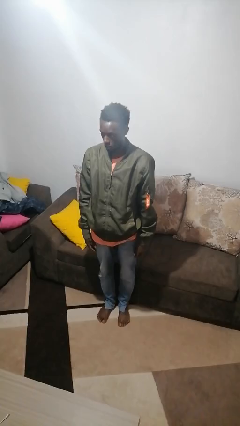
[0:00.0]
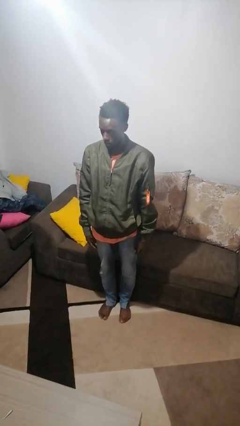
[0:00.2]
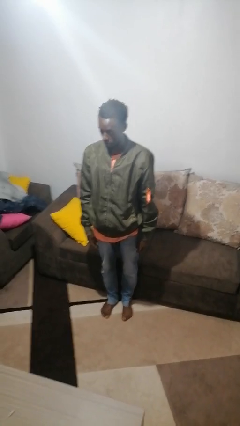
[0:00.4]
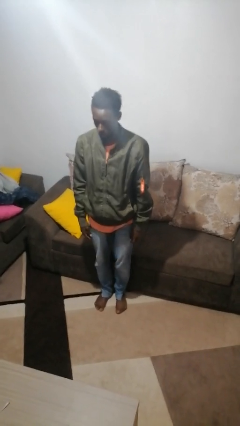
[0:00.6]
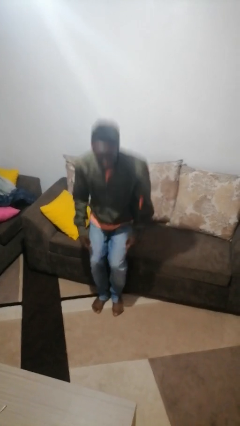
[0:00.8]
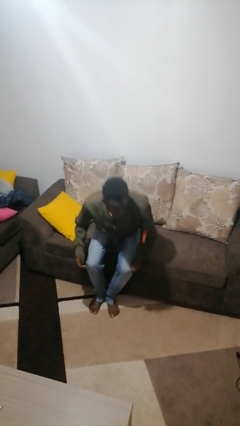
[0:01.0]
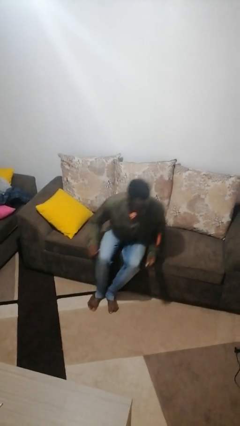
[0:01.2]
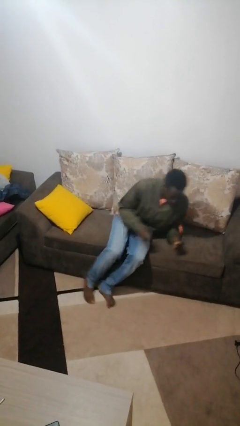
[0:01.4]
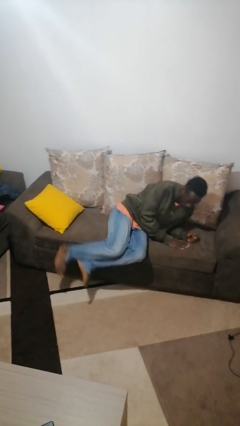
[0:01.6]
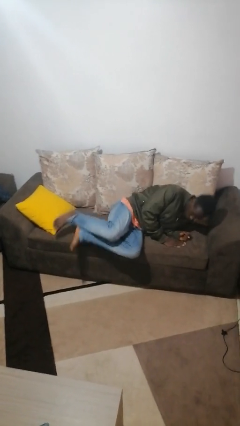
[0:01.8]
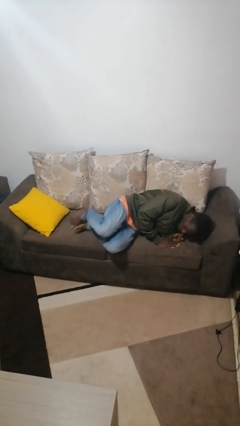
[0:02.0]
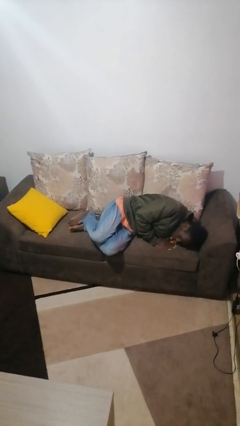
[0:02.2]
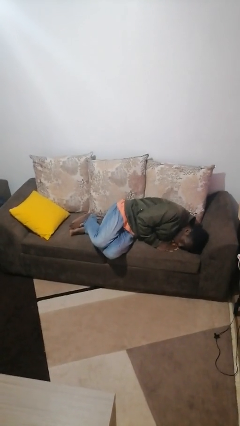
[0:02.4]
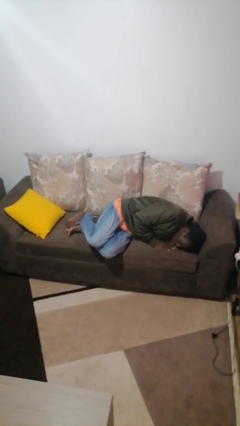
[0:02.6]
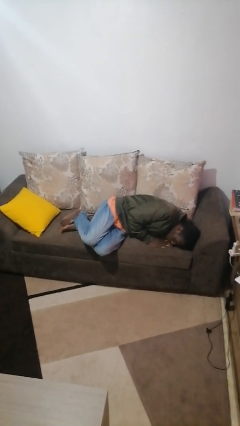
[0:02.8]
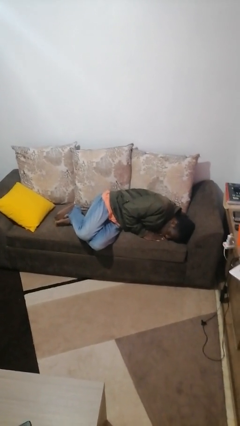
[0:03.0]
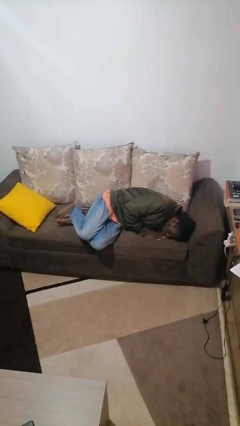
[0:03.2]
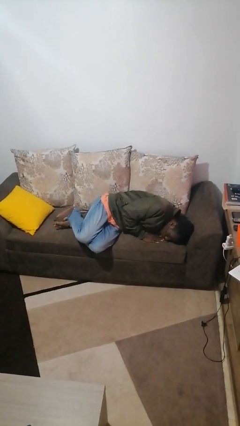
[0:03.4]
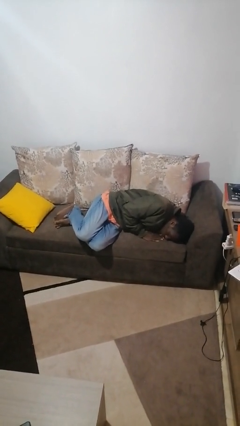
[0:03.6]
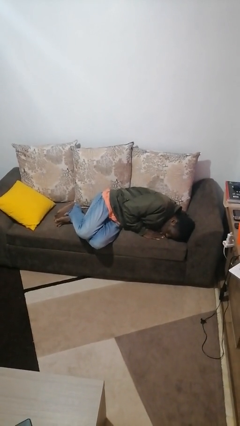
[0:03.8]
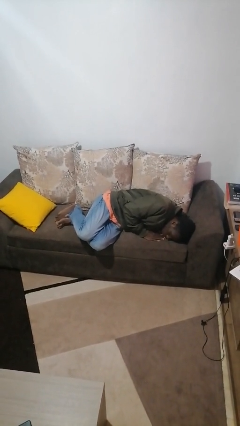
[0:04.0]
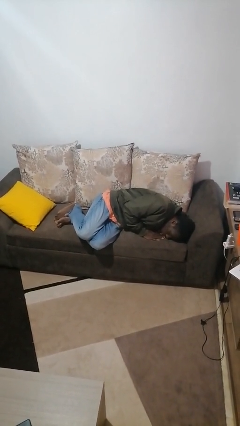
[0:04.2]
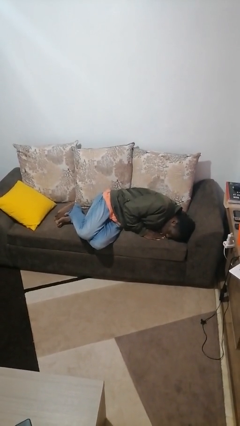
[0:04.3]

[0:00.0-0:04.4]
person lies down on couch

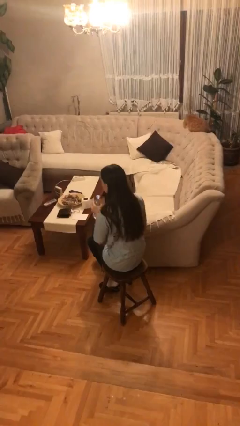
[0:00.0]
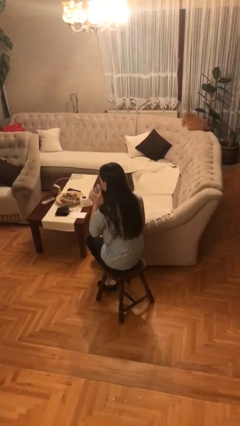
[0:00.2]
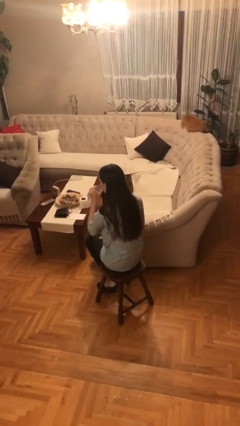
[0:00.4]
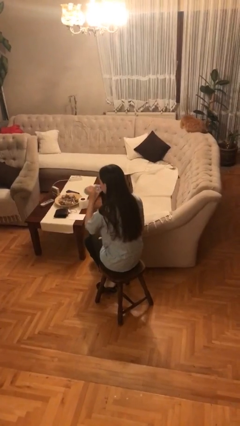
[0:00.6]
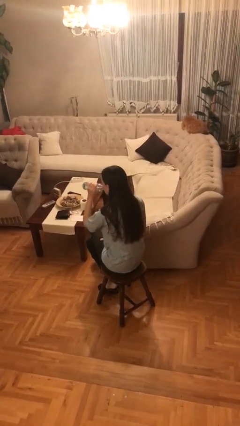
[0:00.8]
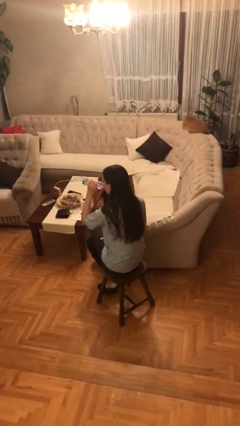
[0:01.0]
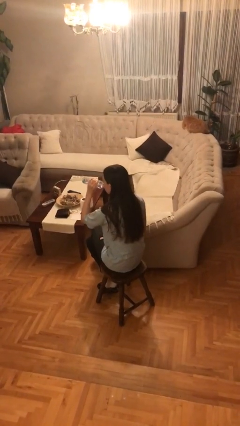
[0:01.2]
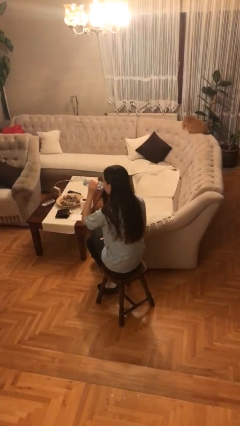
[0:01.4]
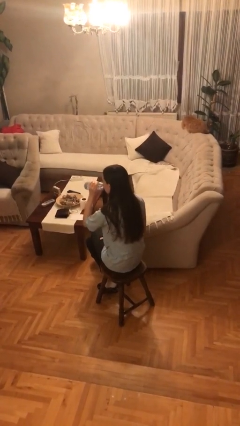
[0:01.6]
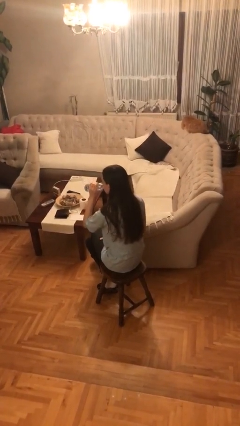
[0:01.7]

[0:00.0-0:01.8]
person drinks from bottle

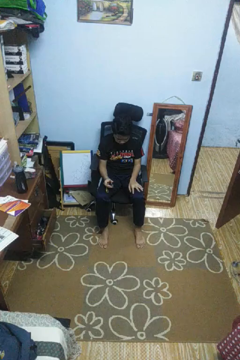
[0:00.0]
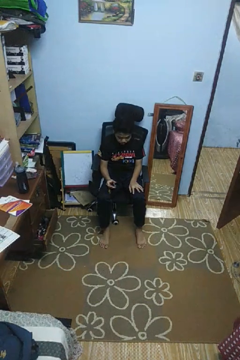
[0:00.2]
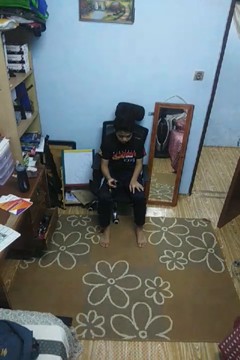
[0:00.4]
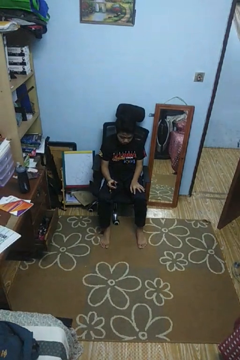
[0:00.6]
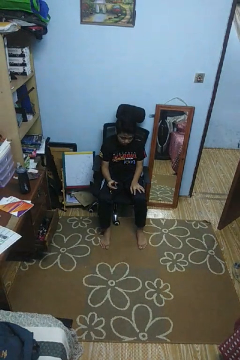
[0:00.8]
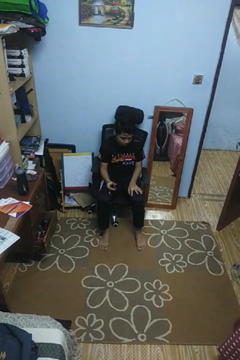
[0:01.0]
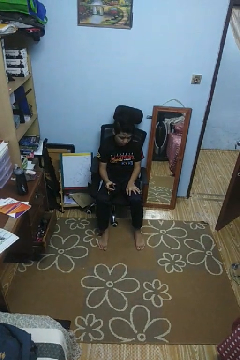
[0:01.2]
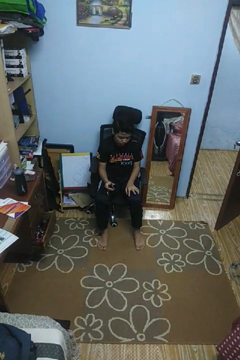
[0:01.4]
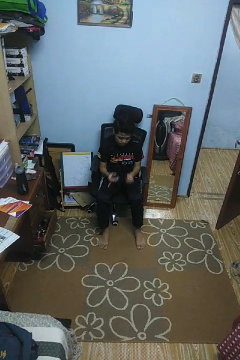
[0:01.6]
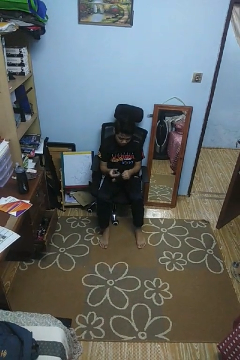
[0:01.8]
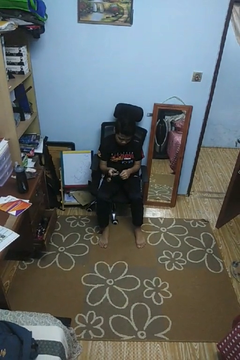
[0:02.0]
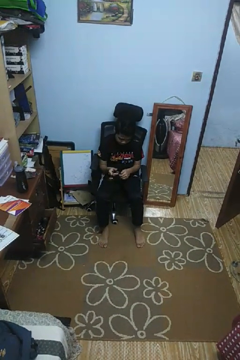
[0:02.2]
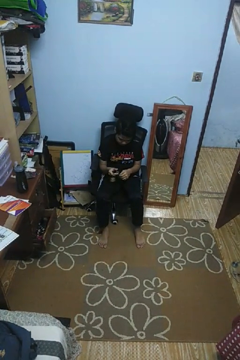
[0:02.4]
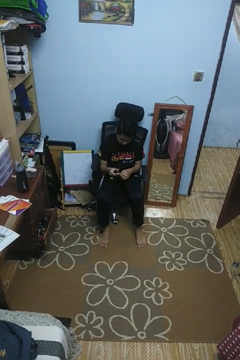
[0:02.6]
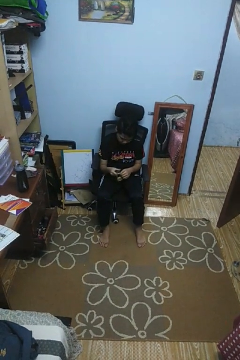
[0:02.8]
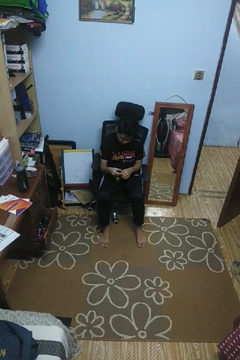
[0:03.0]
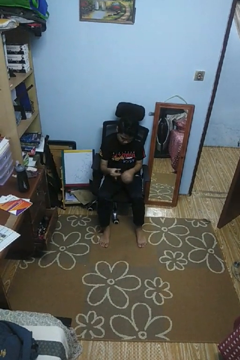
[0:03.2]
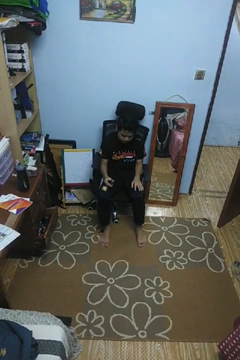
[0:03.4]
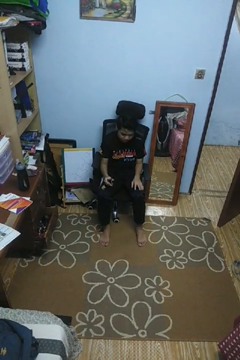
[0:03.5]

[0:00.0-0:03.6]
person clips fingernails

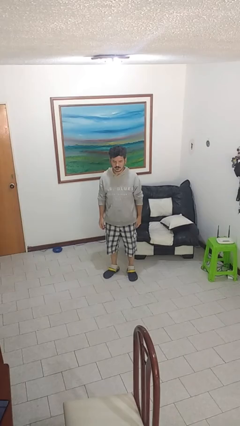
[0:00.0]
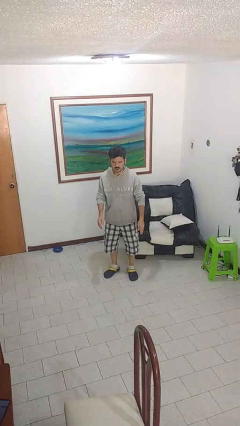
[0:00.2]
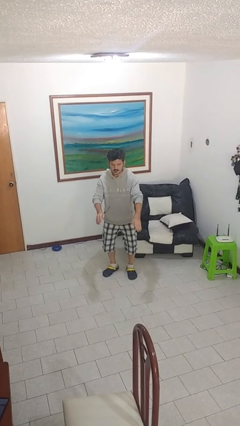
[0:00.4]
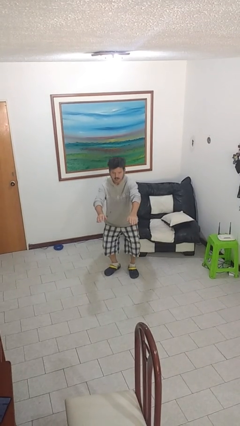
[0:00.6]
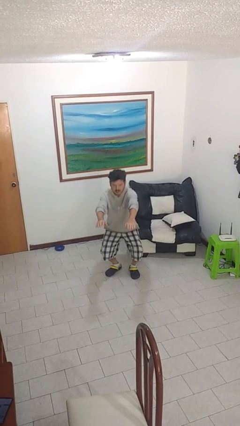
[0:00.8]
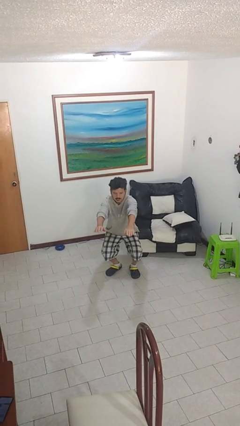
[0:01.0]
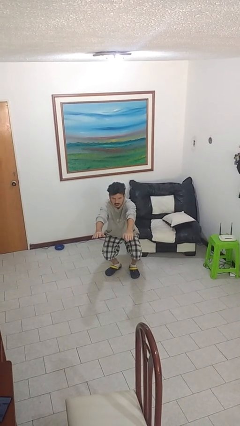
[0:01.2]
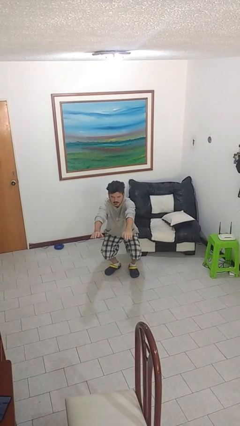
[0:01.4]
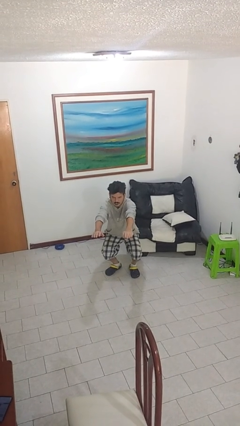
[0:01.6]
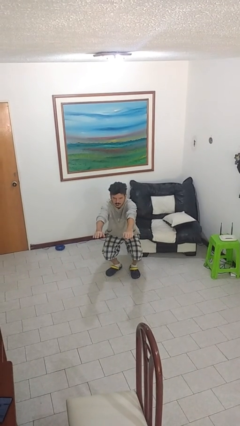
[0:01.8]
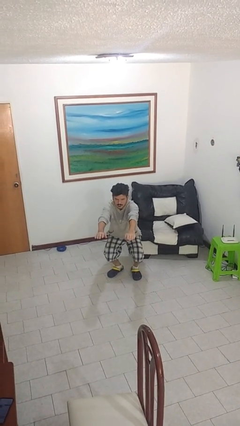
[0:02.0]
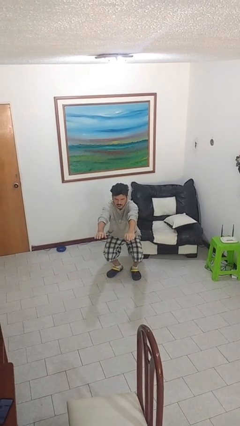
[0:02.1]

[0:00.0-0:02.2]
person squats

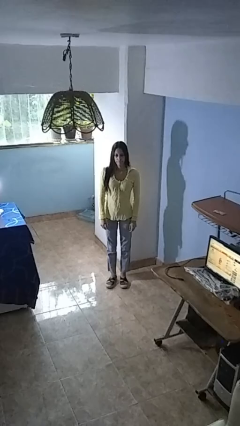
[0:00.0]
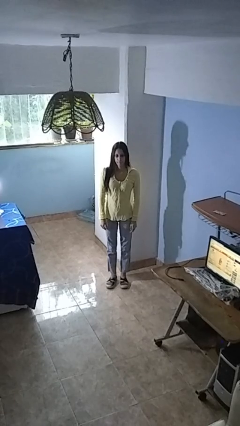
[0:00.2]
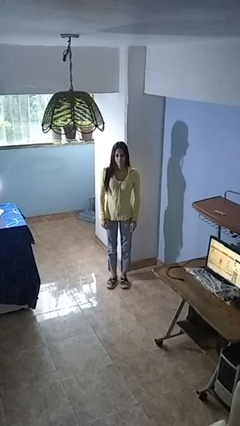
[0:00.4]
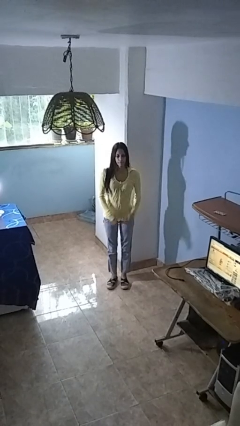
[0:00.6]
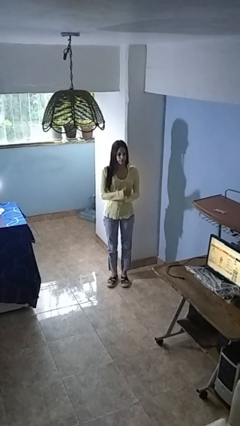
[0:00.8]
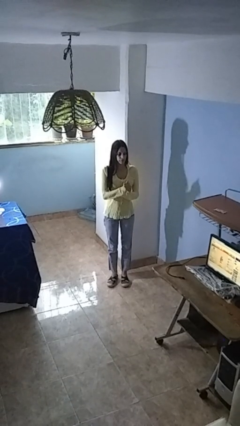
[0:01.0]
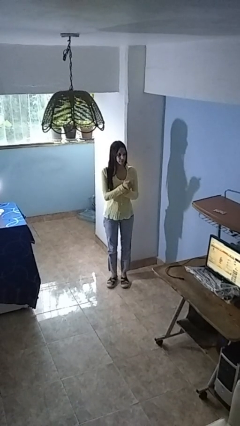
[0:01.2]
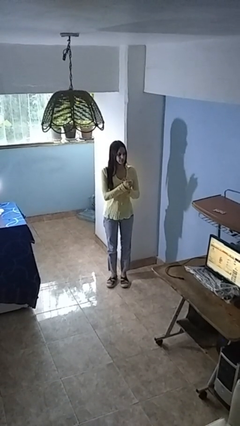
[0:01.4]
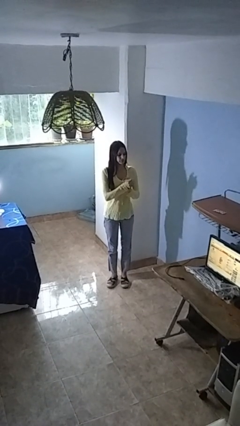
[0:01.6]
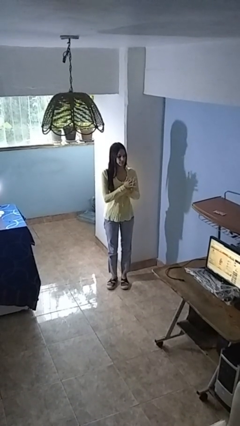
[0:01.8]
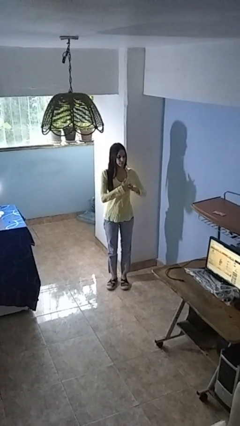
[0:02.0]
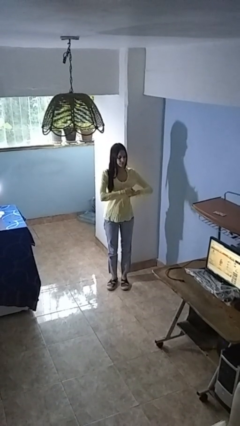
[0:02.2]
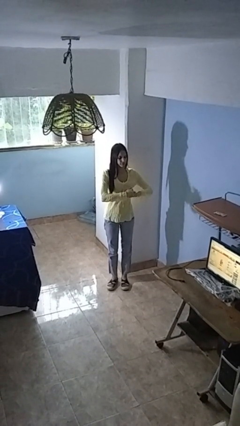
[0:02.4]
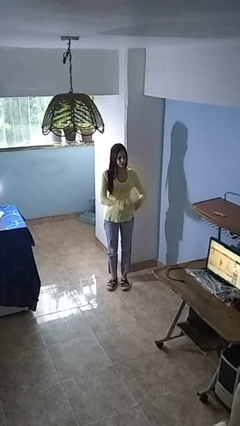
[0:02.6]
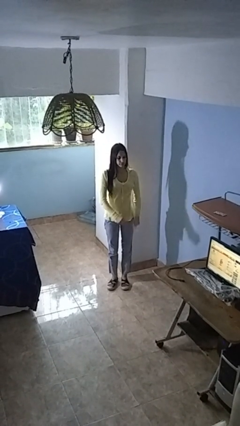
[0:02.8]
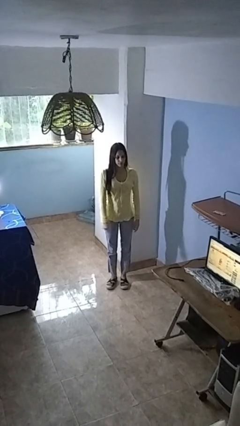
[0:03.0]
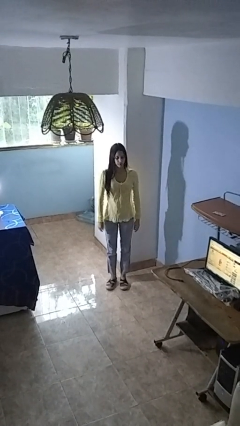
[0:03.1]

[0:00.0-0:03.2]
person cracks knuckles

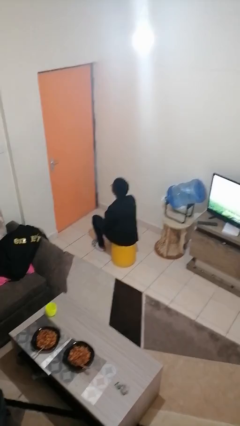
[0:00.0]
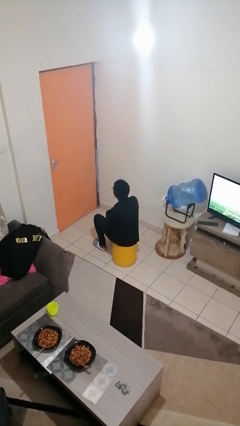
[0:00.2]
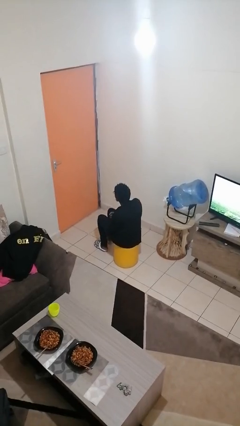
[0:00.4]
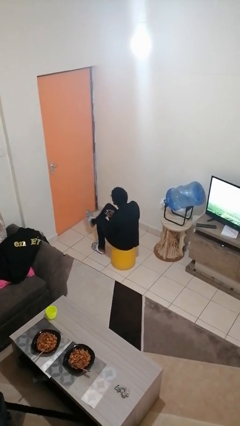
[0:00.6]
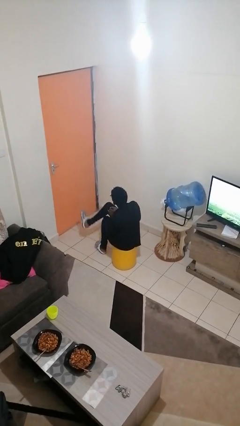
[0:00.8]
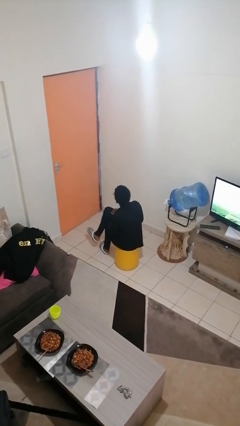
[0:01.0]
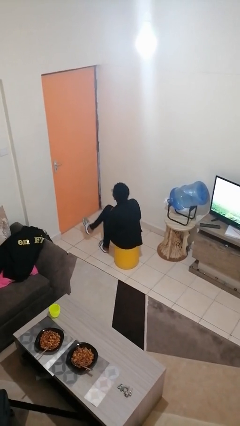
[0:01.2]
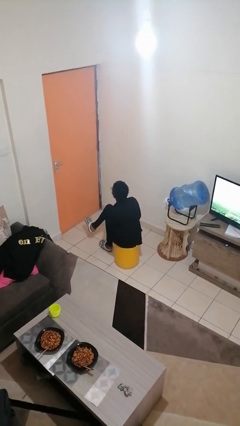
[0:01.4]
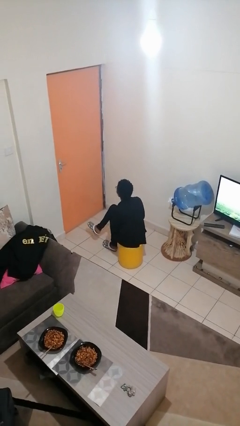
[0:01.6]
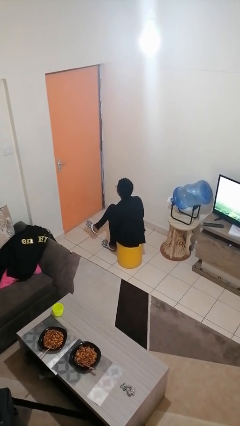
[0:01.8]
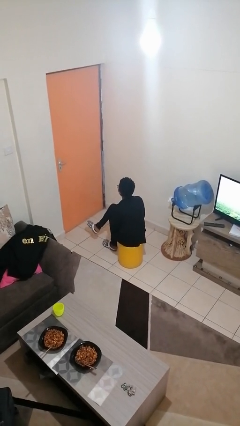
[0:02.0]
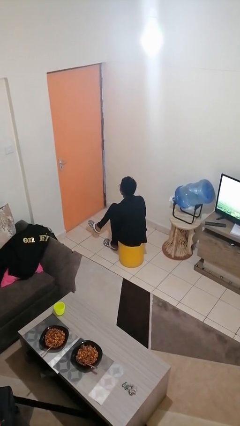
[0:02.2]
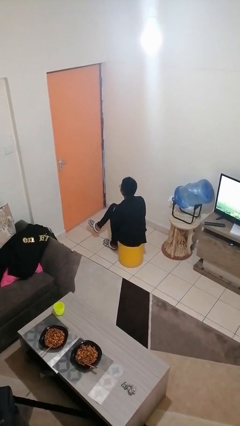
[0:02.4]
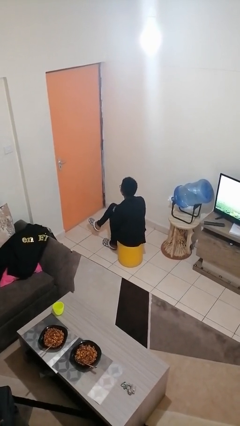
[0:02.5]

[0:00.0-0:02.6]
person crosses legs

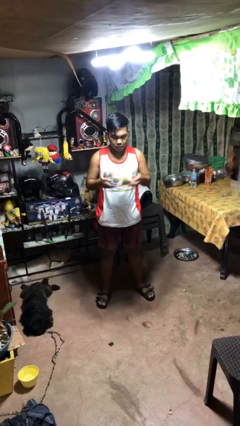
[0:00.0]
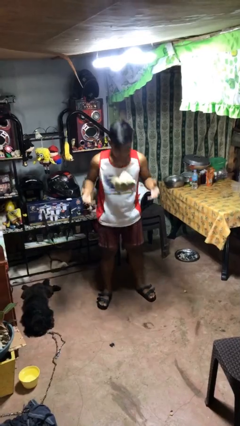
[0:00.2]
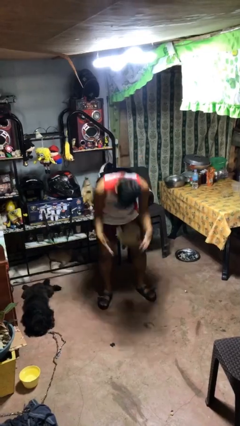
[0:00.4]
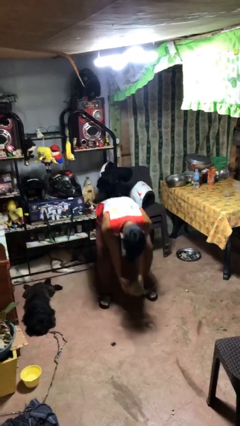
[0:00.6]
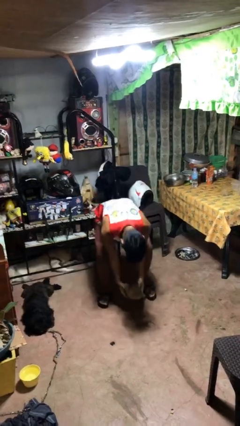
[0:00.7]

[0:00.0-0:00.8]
person drops object
